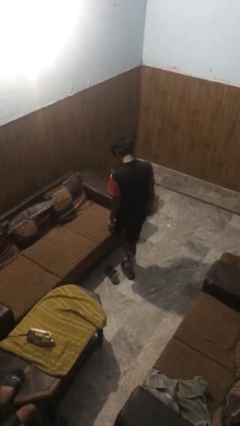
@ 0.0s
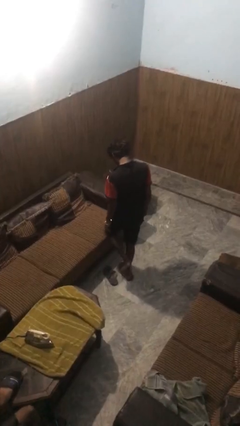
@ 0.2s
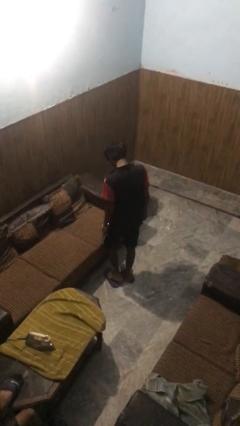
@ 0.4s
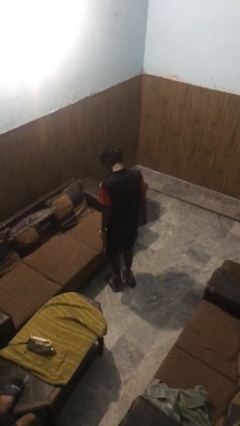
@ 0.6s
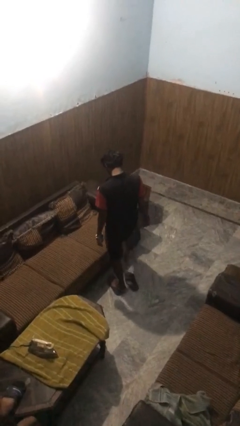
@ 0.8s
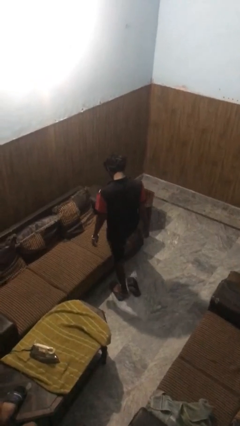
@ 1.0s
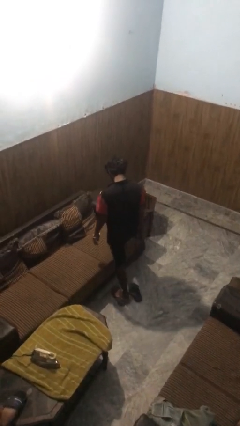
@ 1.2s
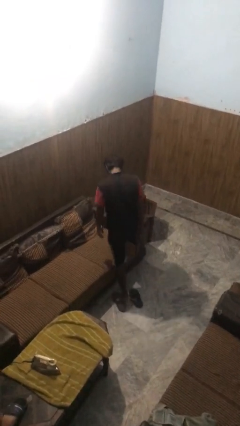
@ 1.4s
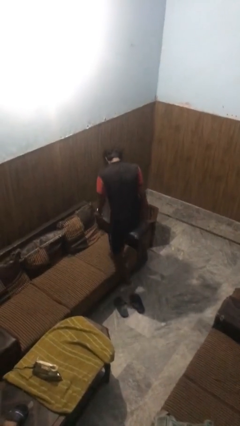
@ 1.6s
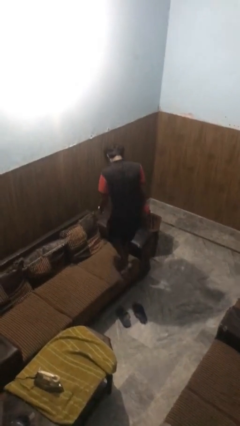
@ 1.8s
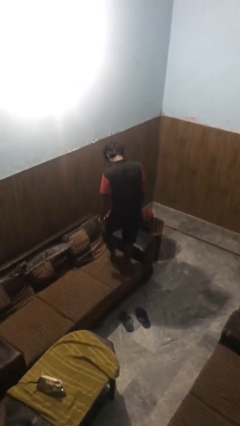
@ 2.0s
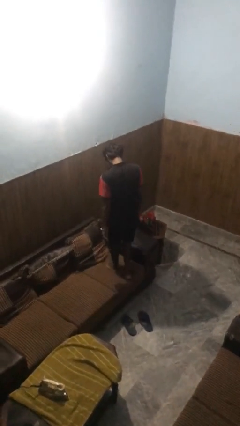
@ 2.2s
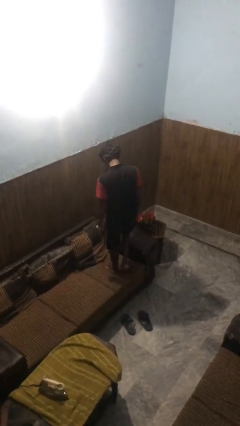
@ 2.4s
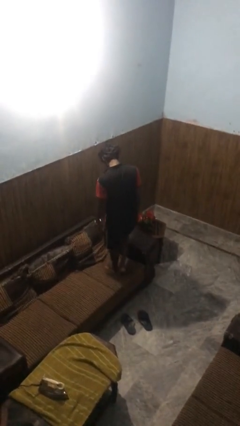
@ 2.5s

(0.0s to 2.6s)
person climbs on couch

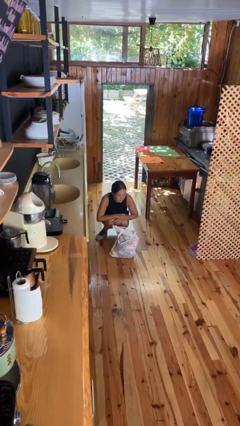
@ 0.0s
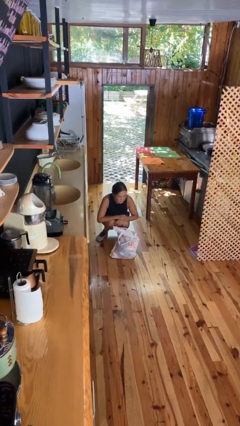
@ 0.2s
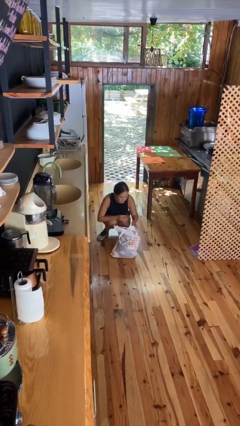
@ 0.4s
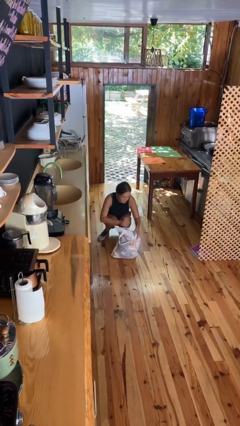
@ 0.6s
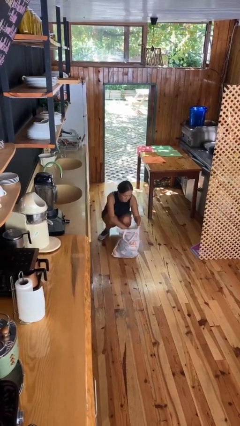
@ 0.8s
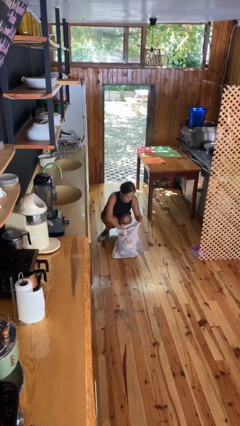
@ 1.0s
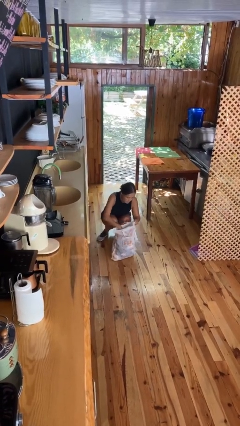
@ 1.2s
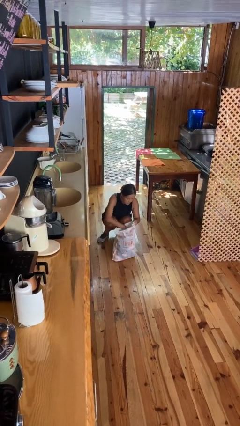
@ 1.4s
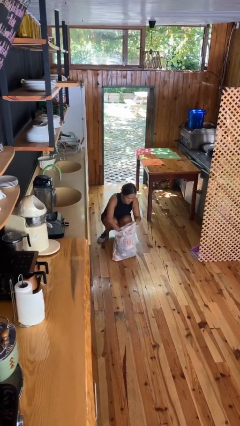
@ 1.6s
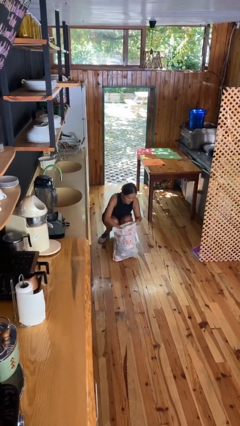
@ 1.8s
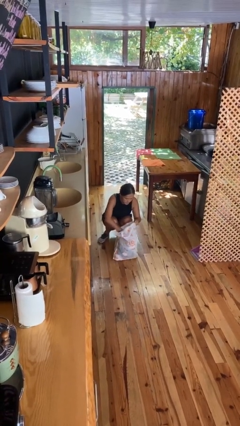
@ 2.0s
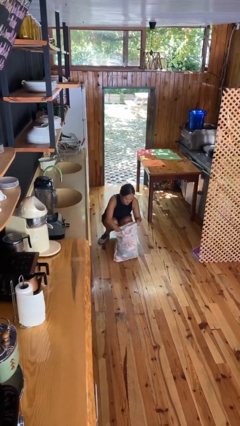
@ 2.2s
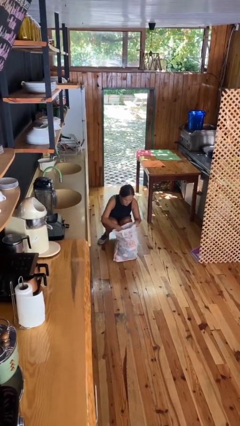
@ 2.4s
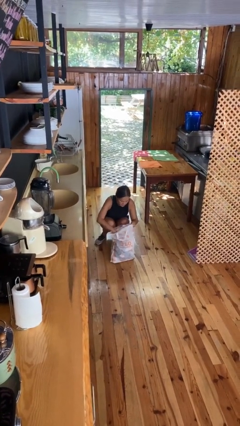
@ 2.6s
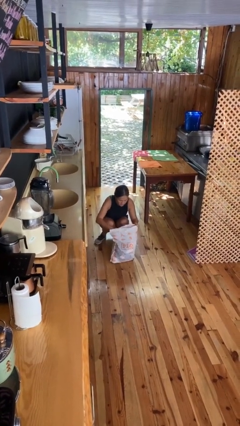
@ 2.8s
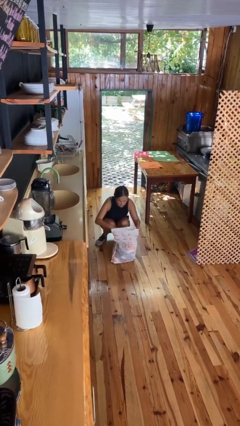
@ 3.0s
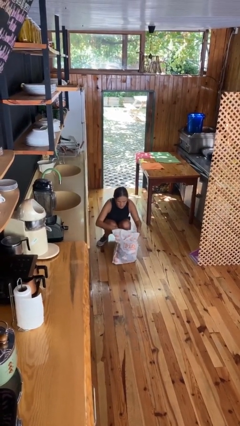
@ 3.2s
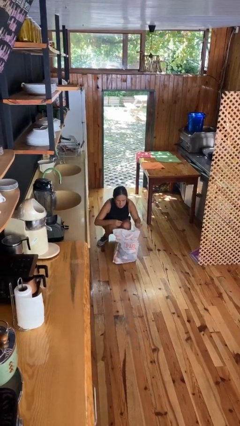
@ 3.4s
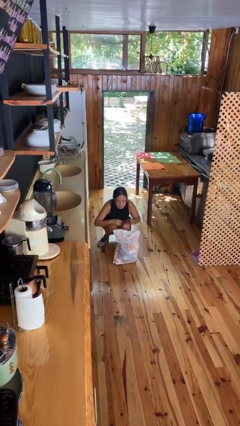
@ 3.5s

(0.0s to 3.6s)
person searches in bag

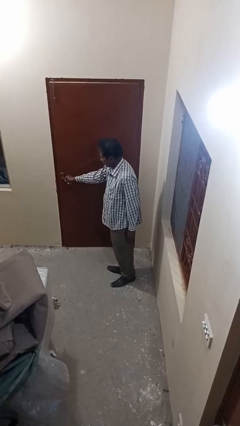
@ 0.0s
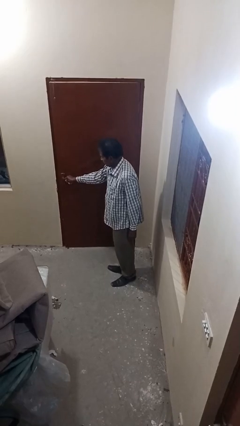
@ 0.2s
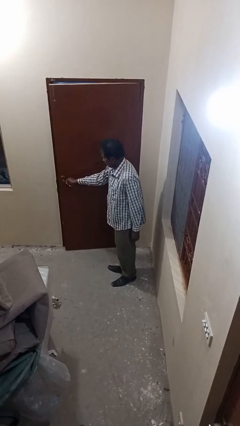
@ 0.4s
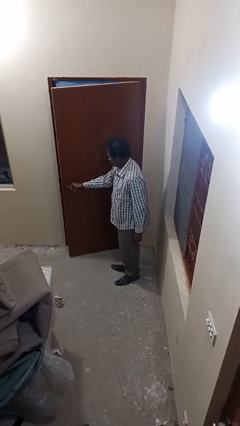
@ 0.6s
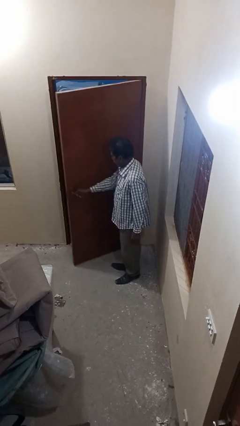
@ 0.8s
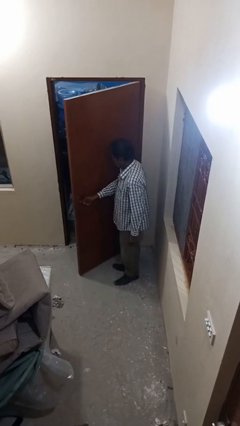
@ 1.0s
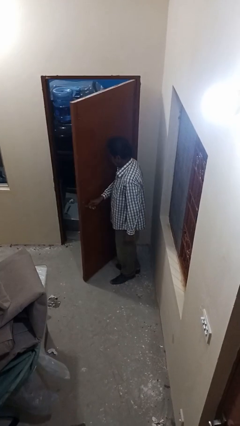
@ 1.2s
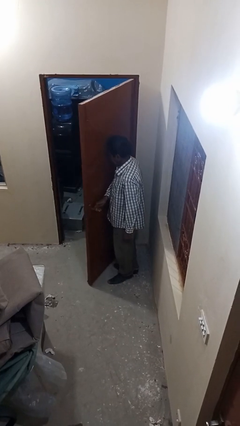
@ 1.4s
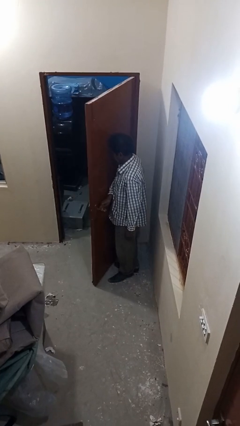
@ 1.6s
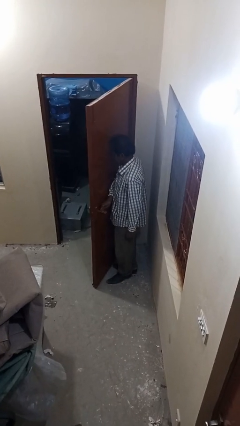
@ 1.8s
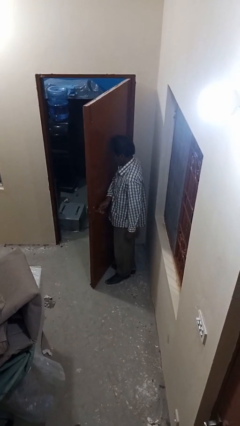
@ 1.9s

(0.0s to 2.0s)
person opens facility door

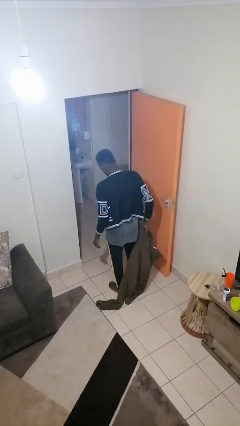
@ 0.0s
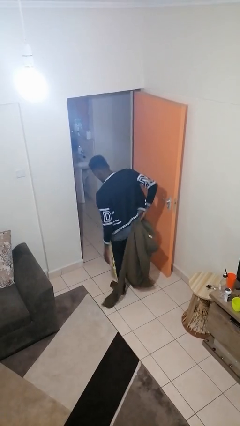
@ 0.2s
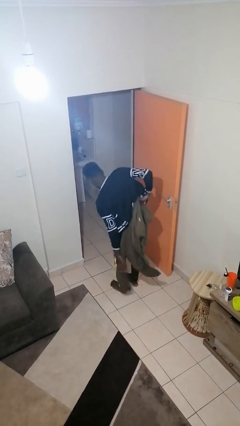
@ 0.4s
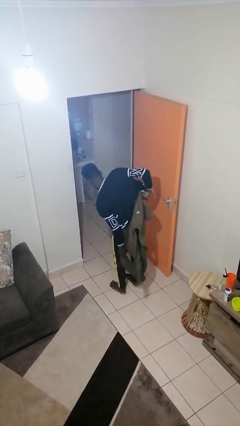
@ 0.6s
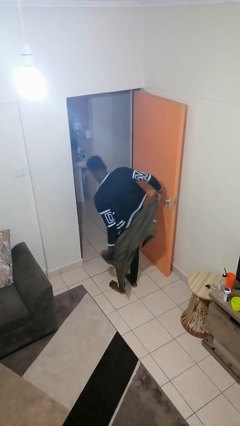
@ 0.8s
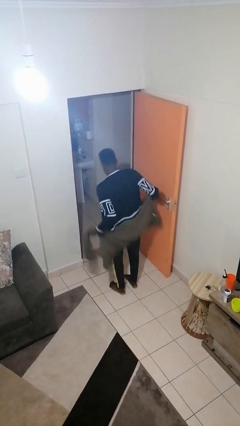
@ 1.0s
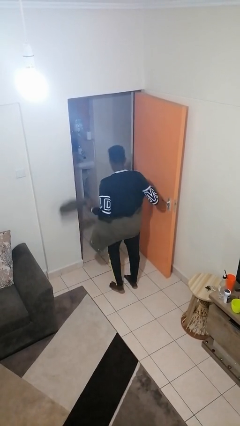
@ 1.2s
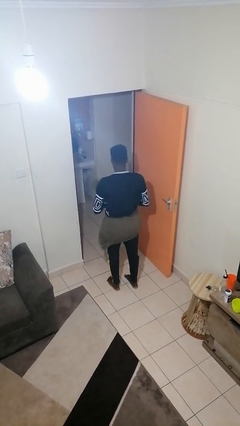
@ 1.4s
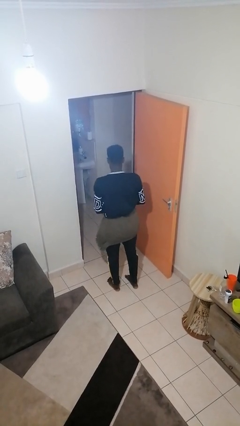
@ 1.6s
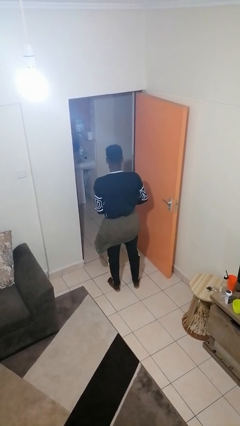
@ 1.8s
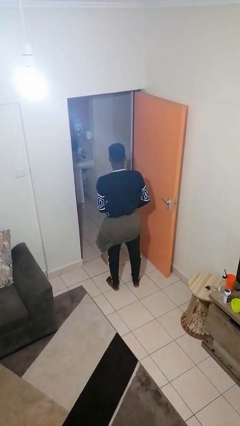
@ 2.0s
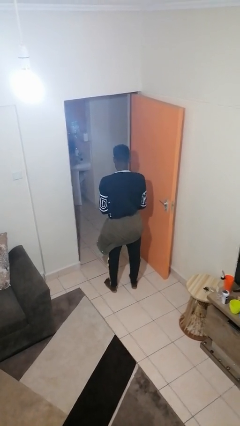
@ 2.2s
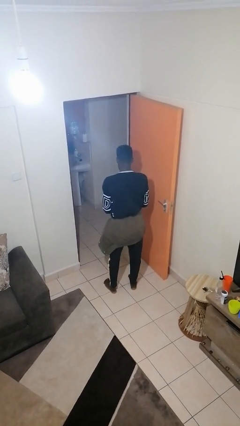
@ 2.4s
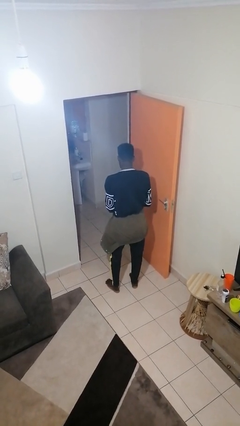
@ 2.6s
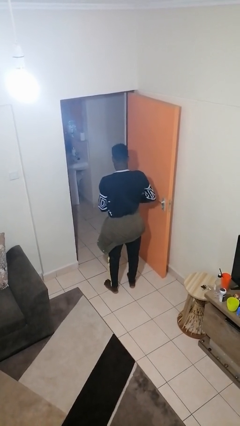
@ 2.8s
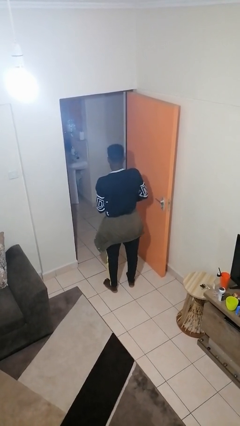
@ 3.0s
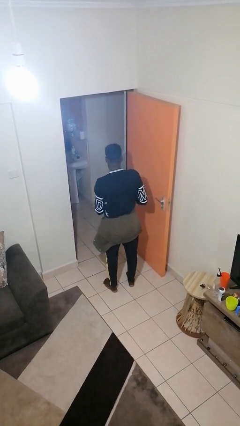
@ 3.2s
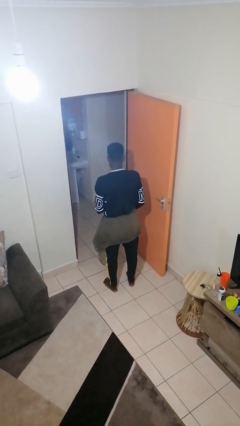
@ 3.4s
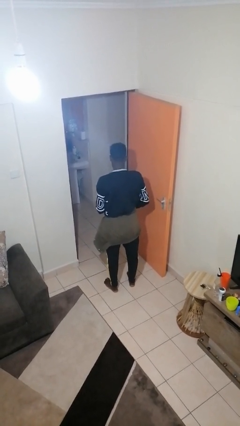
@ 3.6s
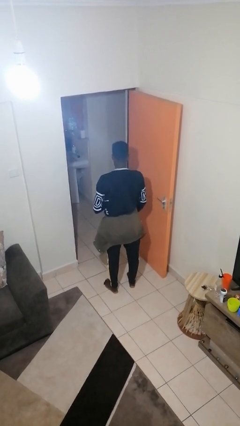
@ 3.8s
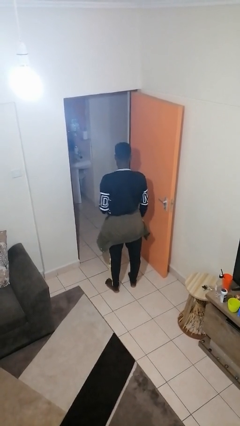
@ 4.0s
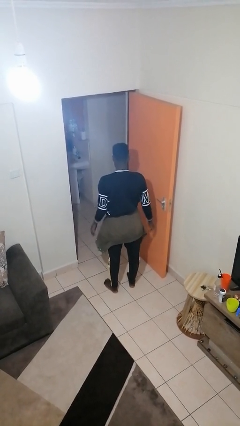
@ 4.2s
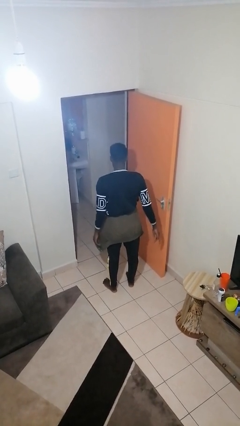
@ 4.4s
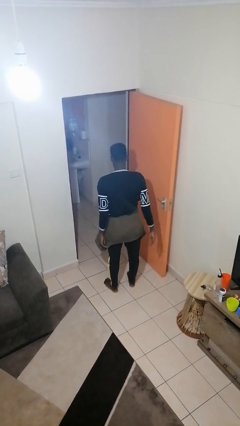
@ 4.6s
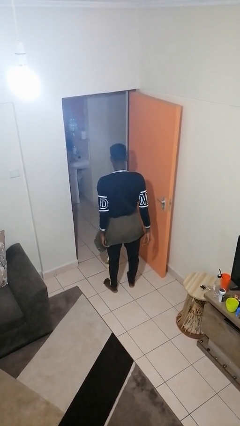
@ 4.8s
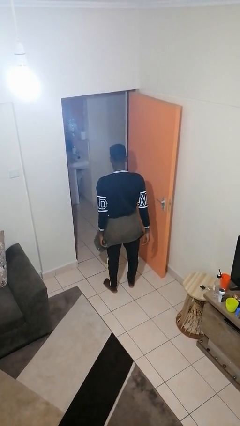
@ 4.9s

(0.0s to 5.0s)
person ties jacket around waist

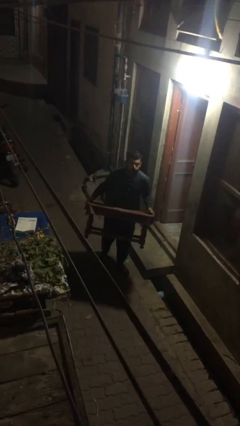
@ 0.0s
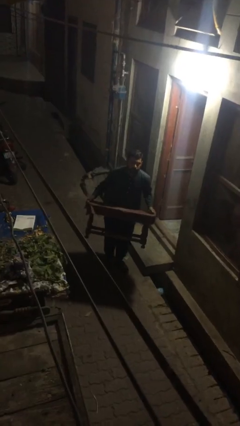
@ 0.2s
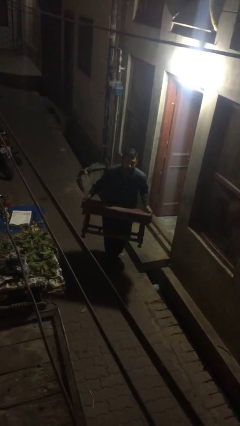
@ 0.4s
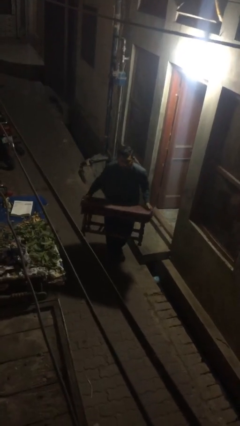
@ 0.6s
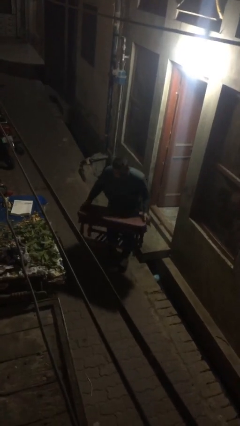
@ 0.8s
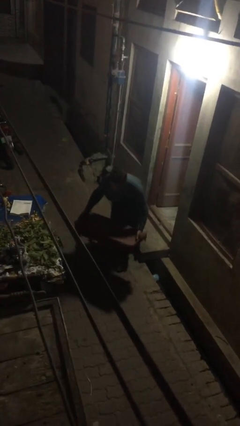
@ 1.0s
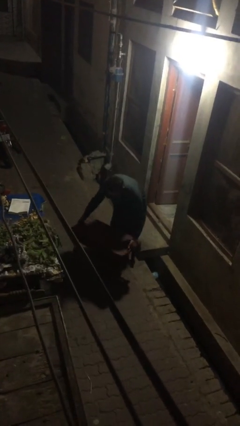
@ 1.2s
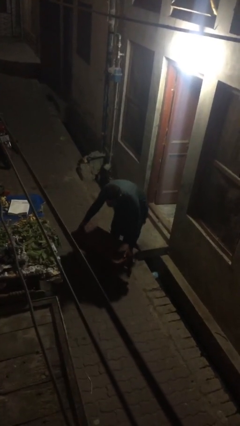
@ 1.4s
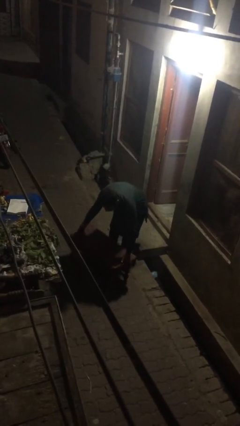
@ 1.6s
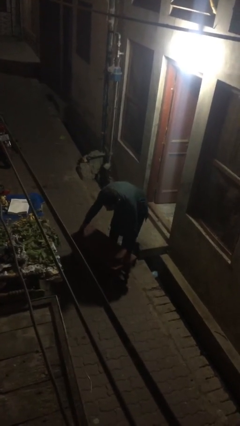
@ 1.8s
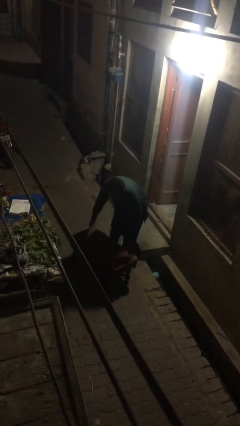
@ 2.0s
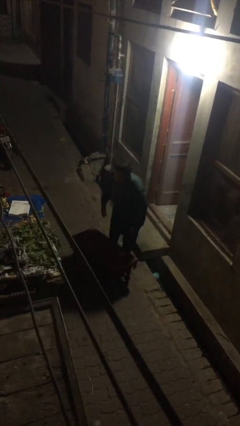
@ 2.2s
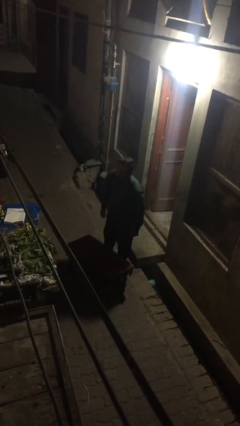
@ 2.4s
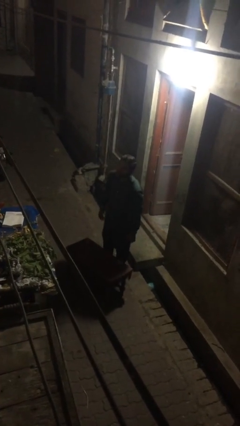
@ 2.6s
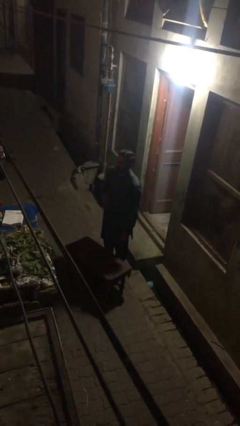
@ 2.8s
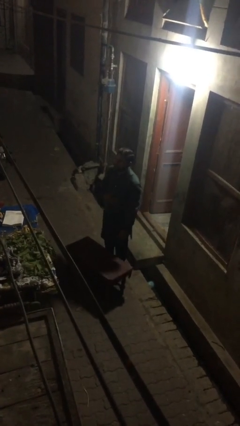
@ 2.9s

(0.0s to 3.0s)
person puts down object on floor

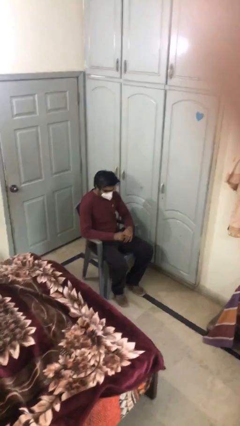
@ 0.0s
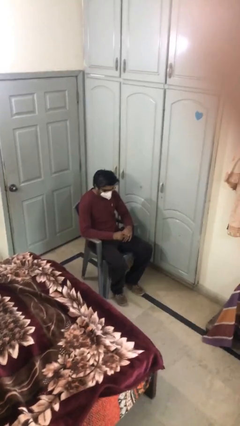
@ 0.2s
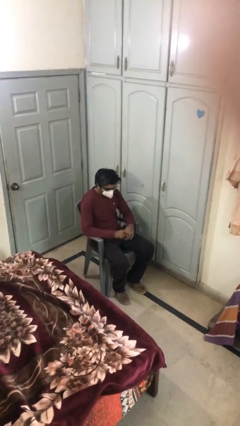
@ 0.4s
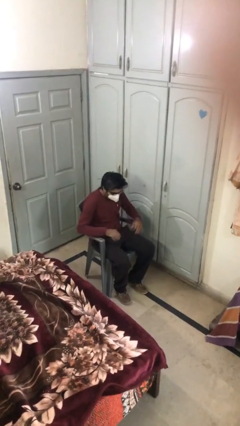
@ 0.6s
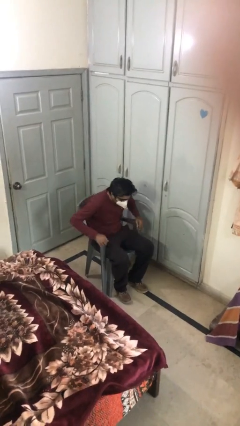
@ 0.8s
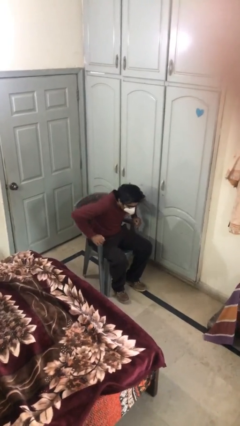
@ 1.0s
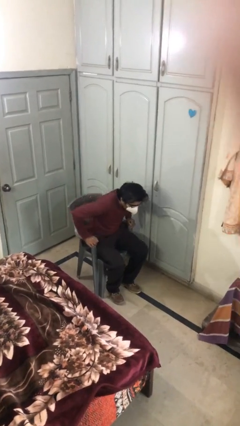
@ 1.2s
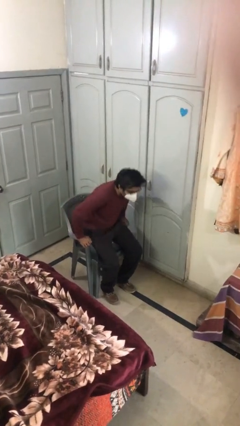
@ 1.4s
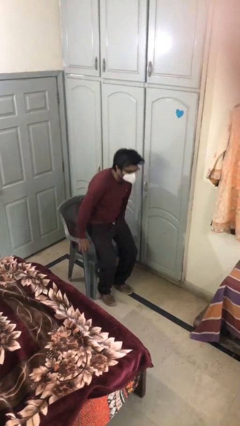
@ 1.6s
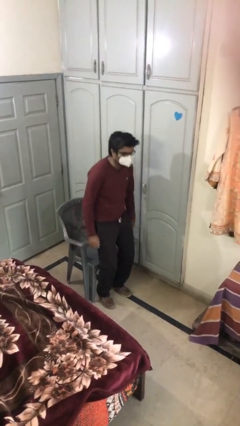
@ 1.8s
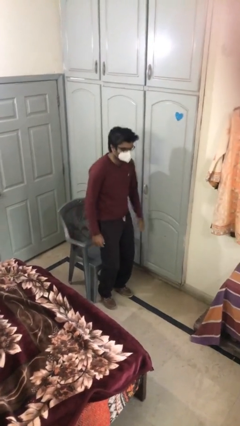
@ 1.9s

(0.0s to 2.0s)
person stands up
